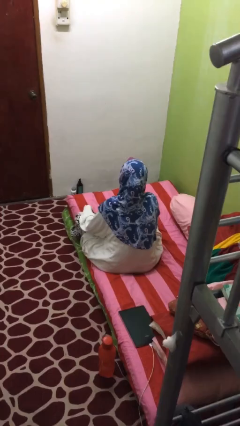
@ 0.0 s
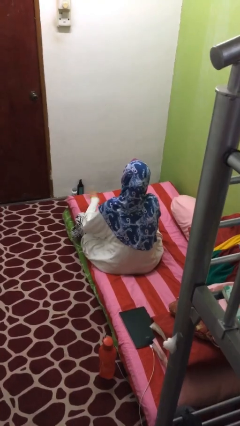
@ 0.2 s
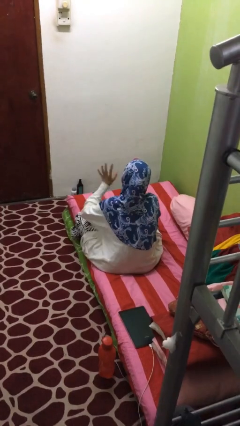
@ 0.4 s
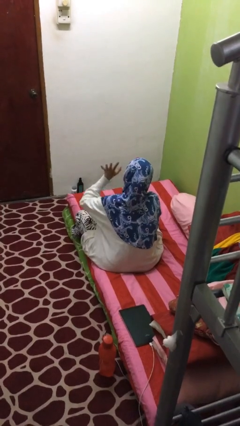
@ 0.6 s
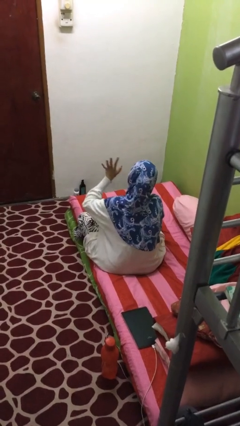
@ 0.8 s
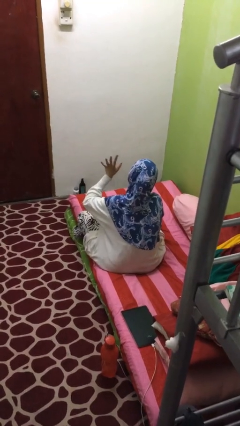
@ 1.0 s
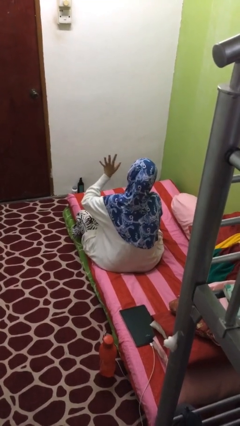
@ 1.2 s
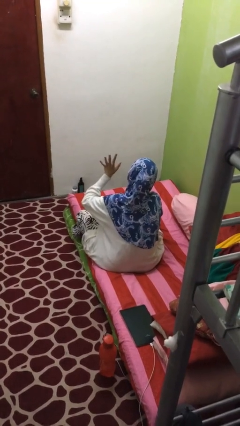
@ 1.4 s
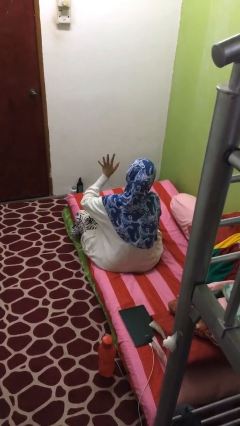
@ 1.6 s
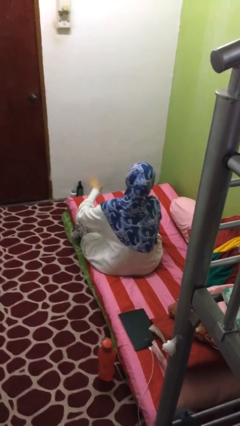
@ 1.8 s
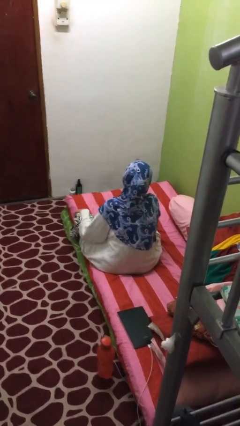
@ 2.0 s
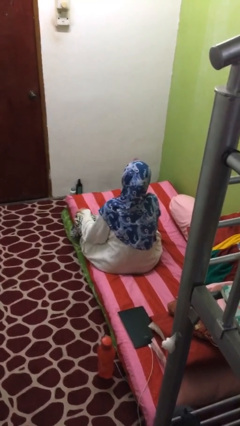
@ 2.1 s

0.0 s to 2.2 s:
person gestures number five

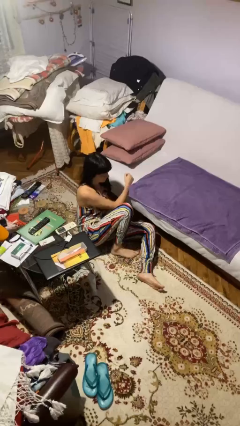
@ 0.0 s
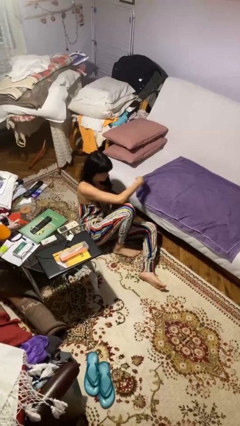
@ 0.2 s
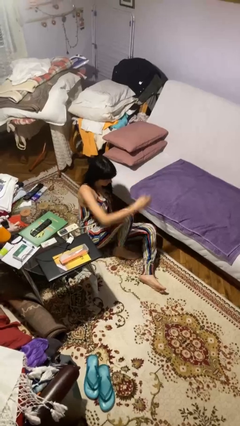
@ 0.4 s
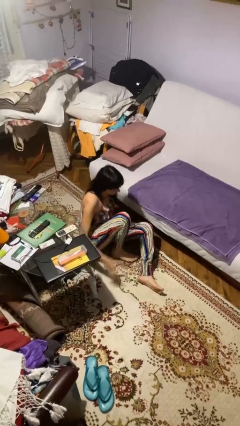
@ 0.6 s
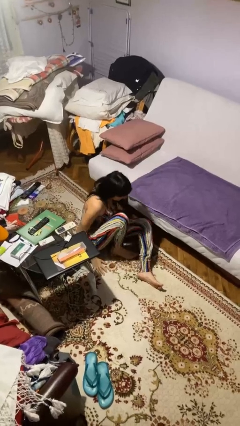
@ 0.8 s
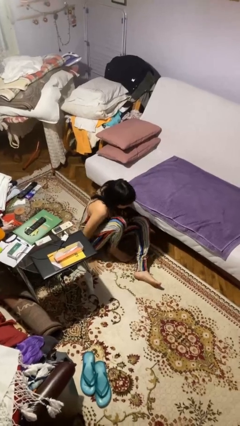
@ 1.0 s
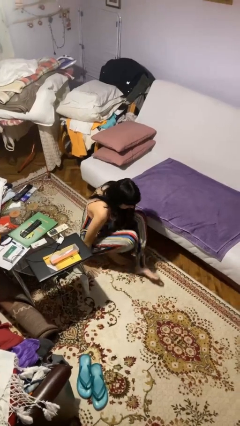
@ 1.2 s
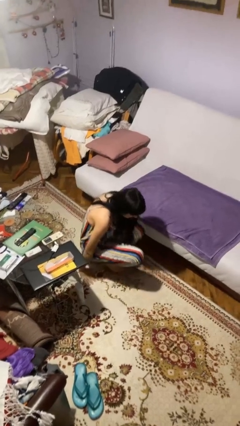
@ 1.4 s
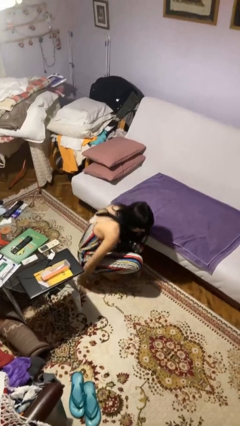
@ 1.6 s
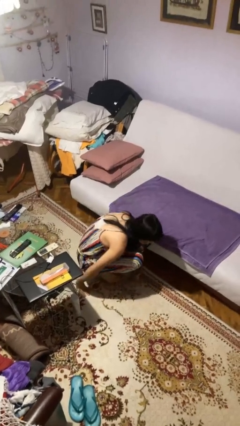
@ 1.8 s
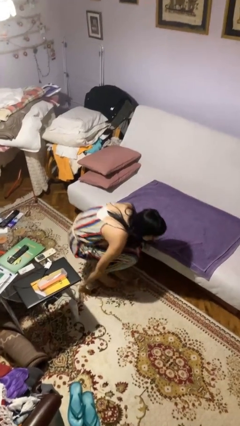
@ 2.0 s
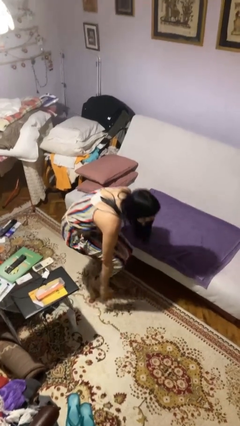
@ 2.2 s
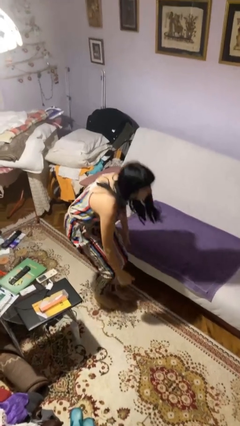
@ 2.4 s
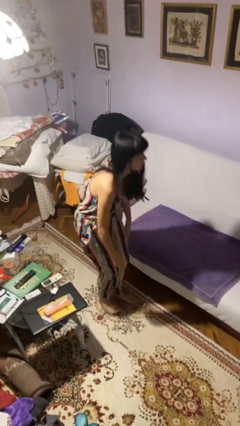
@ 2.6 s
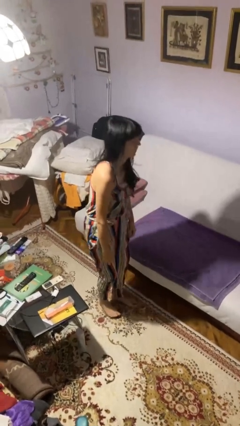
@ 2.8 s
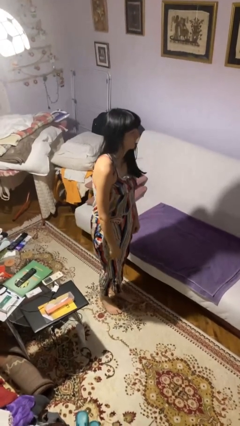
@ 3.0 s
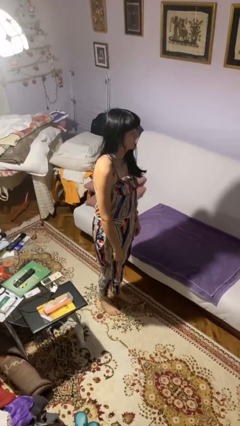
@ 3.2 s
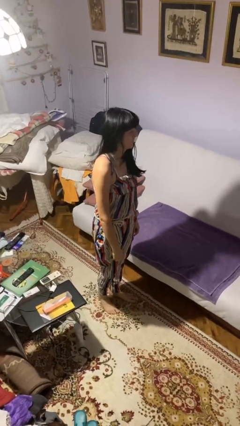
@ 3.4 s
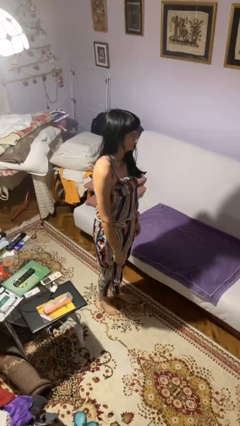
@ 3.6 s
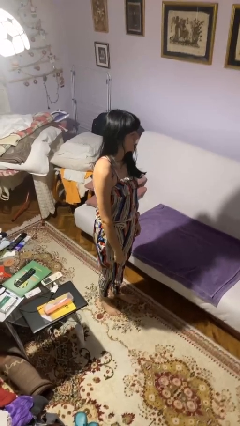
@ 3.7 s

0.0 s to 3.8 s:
person stands up from floor

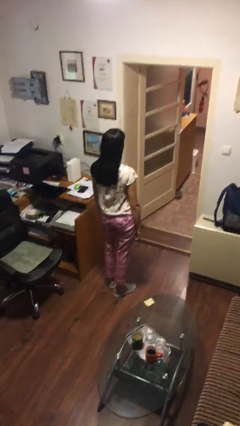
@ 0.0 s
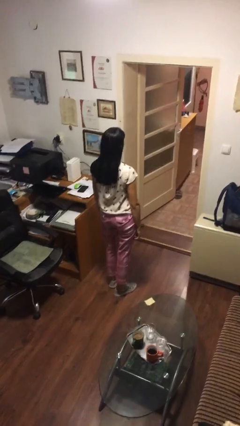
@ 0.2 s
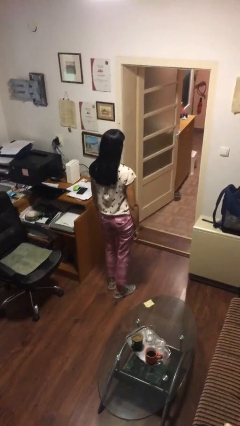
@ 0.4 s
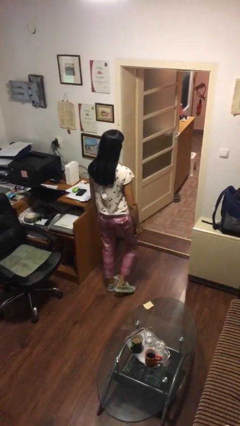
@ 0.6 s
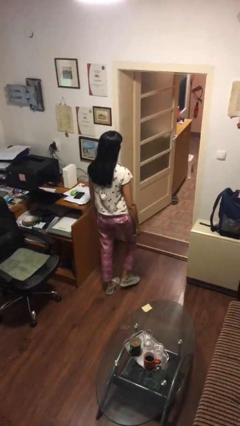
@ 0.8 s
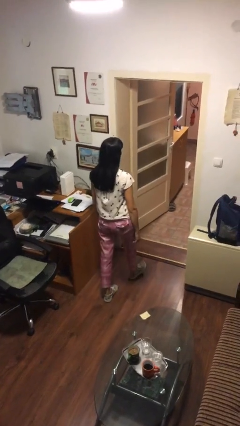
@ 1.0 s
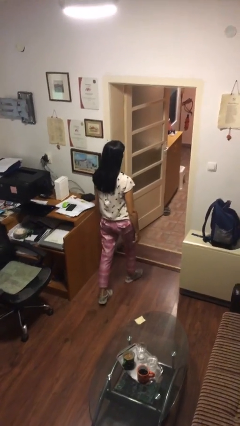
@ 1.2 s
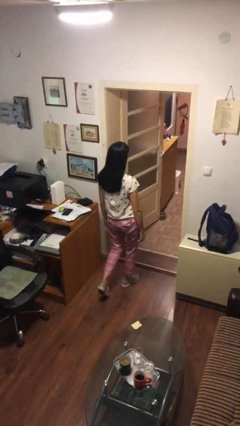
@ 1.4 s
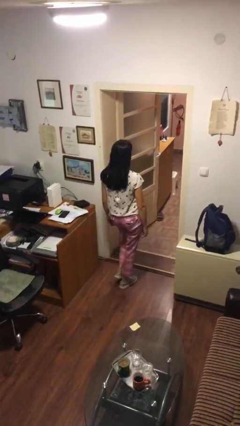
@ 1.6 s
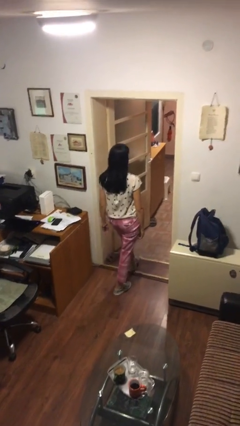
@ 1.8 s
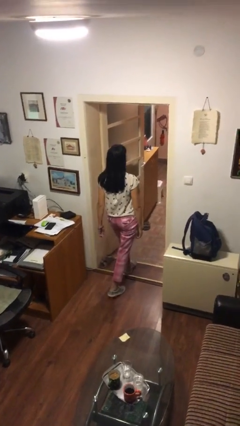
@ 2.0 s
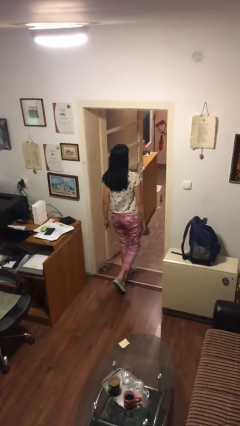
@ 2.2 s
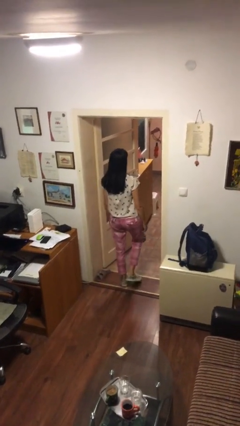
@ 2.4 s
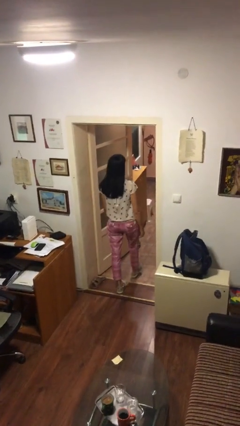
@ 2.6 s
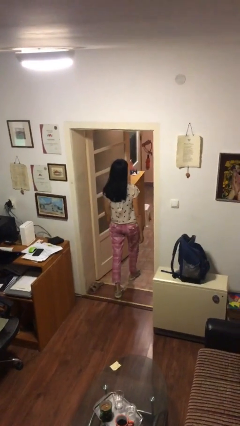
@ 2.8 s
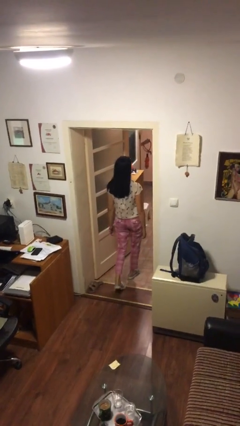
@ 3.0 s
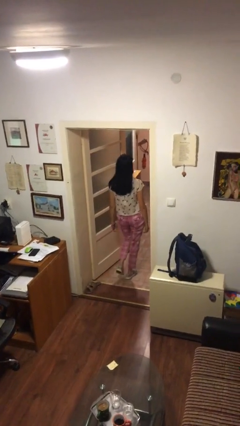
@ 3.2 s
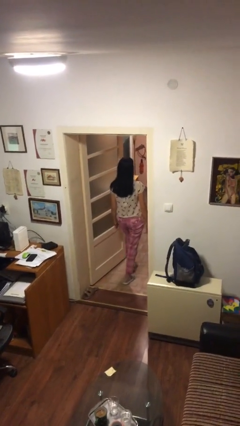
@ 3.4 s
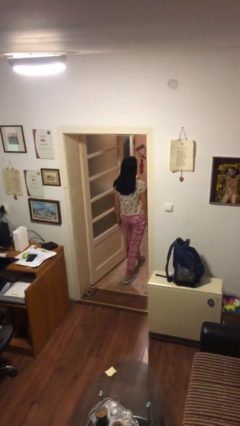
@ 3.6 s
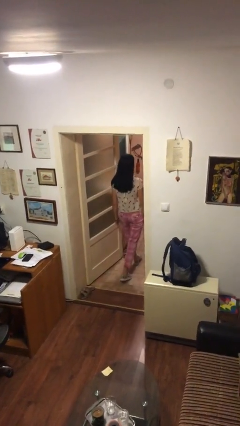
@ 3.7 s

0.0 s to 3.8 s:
person exits scene through structure

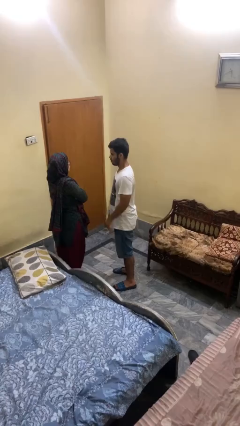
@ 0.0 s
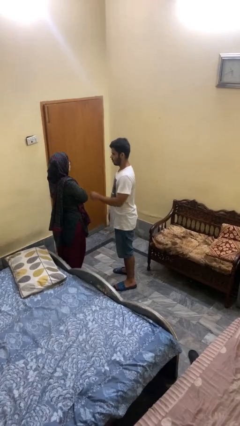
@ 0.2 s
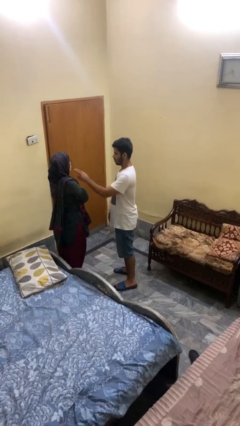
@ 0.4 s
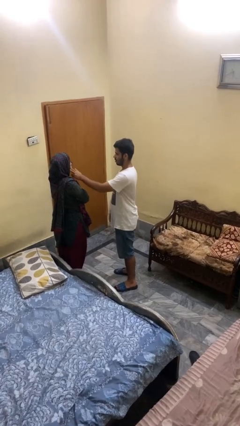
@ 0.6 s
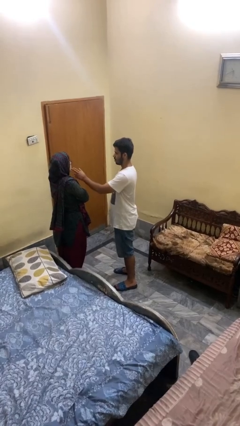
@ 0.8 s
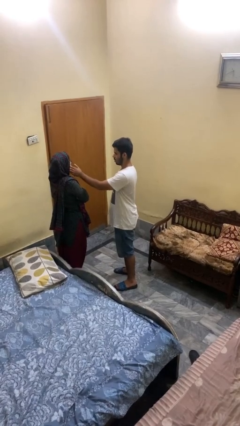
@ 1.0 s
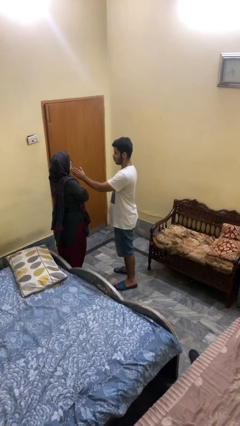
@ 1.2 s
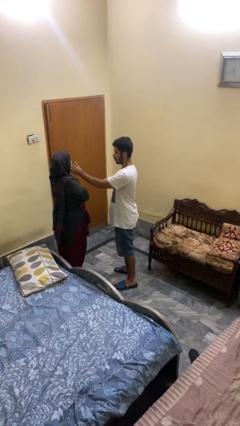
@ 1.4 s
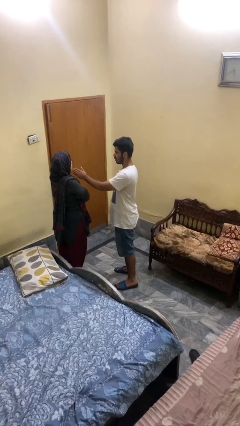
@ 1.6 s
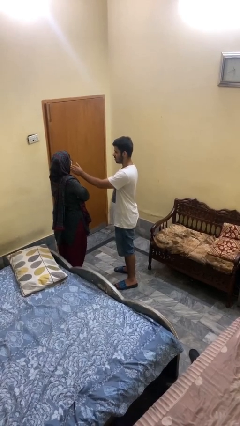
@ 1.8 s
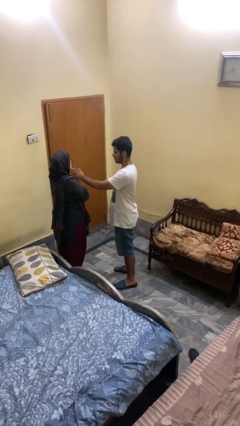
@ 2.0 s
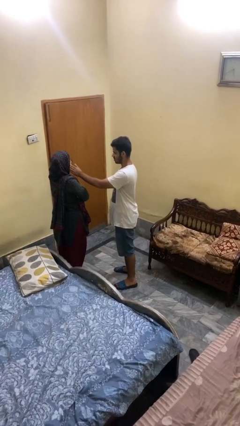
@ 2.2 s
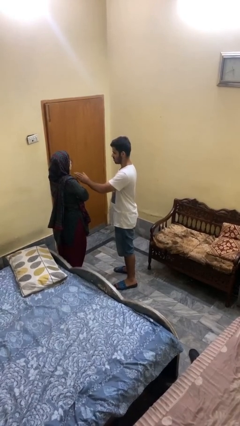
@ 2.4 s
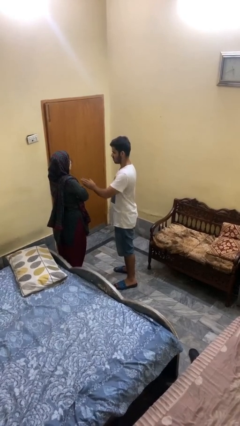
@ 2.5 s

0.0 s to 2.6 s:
person touches face of person

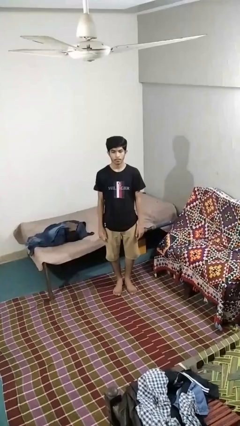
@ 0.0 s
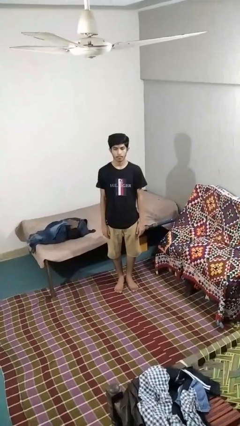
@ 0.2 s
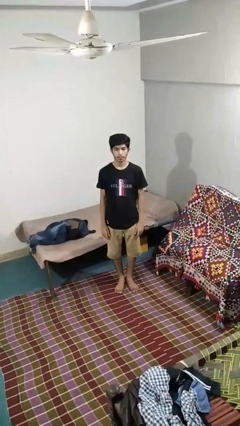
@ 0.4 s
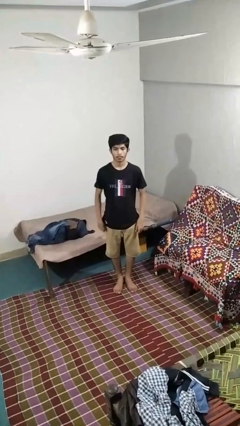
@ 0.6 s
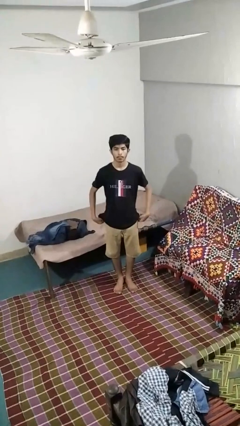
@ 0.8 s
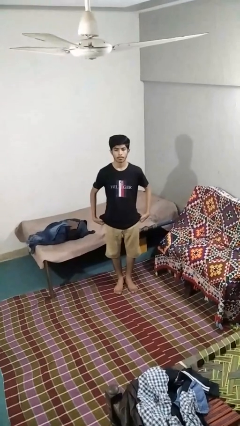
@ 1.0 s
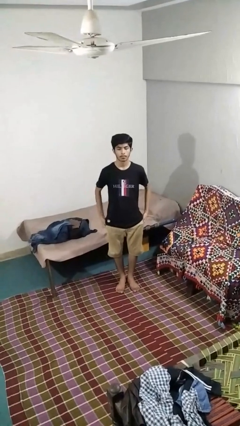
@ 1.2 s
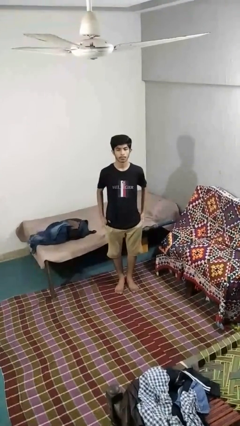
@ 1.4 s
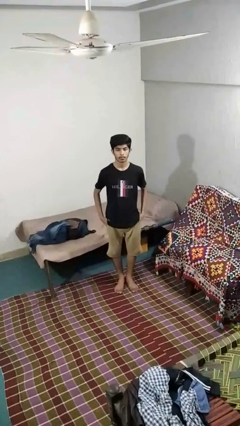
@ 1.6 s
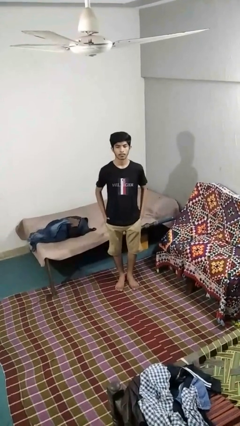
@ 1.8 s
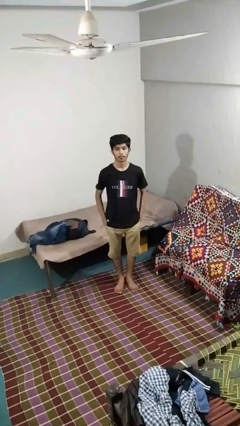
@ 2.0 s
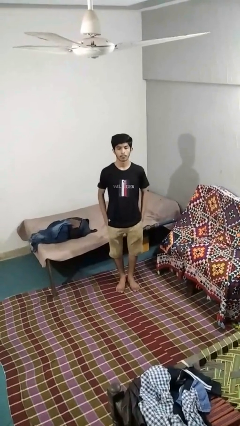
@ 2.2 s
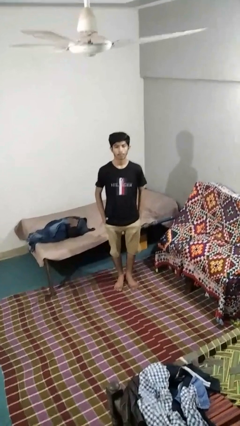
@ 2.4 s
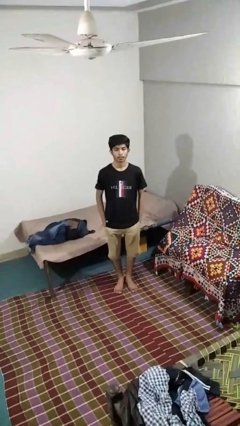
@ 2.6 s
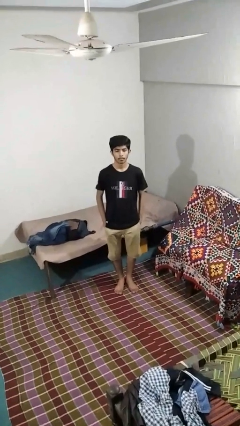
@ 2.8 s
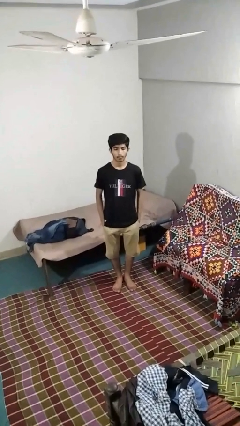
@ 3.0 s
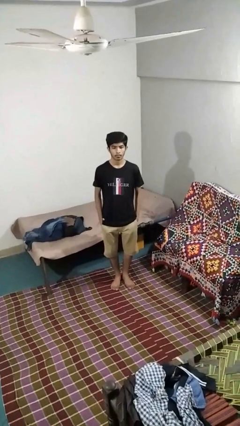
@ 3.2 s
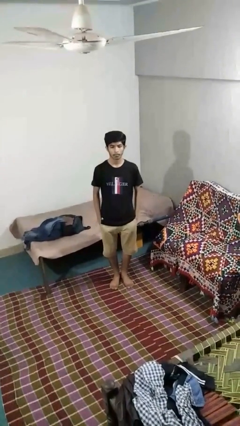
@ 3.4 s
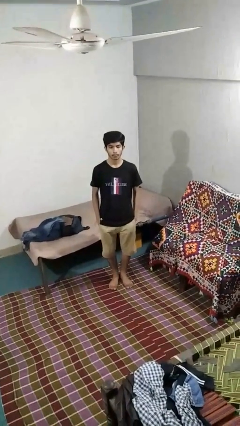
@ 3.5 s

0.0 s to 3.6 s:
person puts hands in back pockets

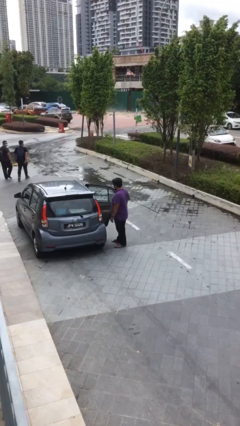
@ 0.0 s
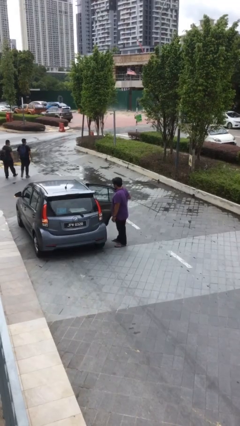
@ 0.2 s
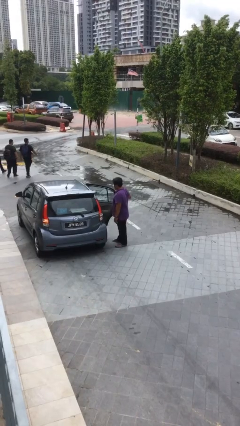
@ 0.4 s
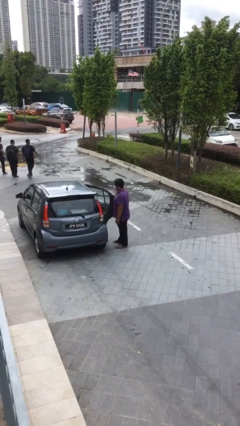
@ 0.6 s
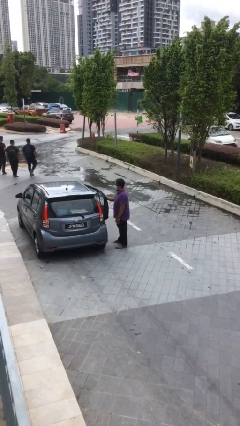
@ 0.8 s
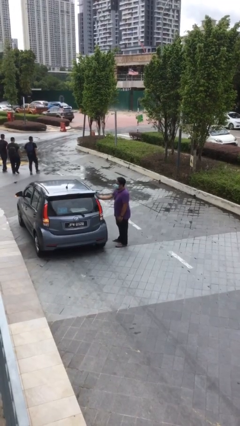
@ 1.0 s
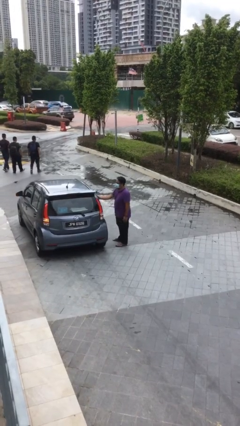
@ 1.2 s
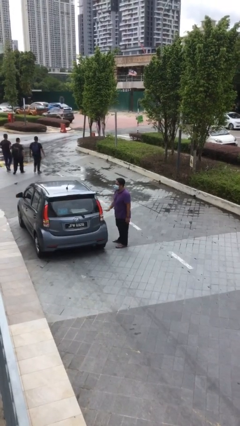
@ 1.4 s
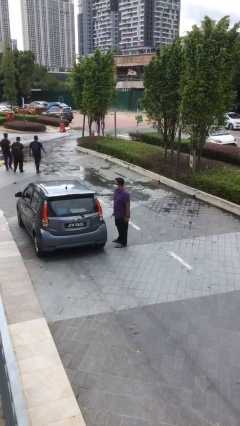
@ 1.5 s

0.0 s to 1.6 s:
person closes car door
